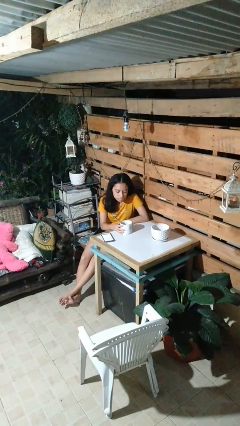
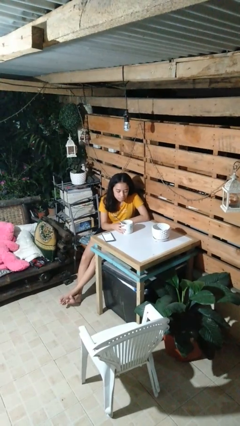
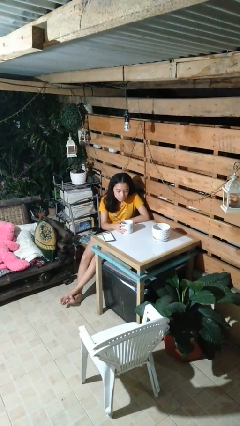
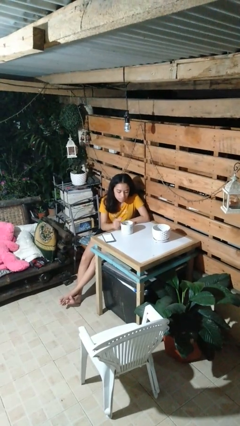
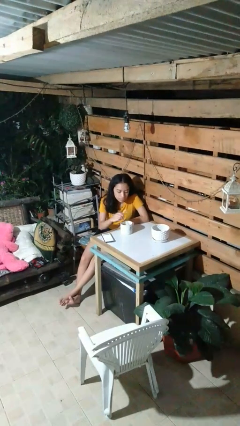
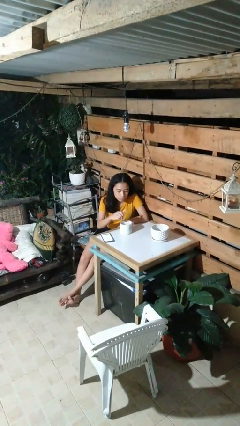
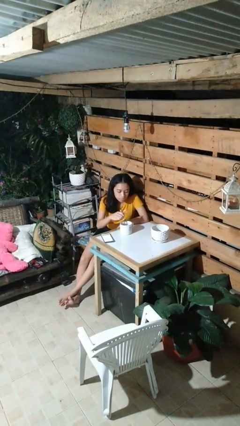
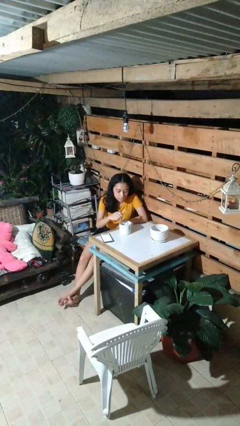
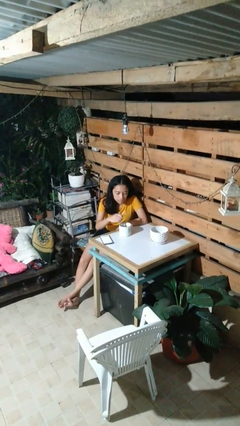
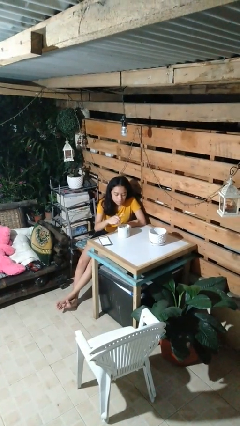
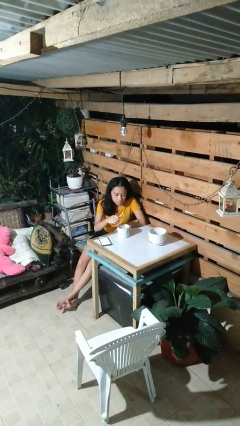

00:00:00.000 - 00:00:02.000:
person stirs mug

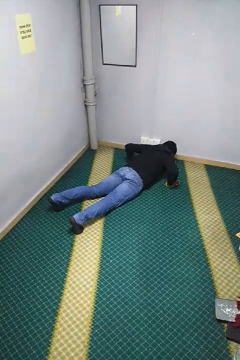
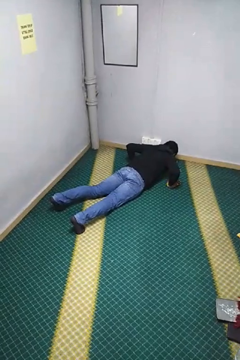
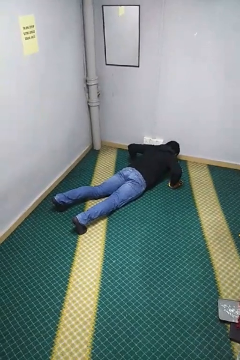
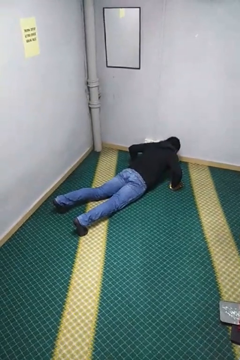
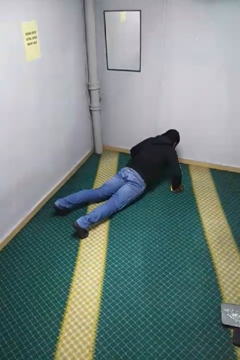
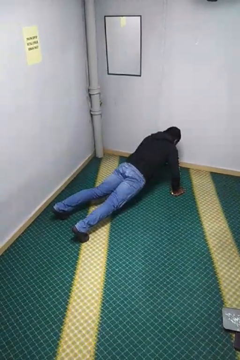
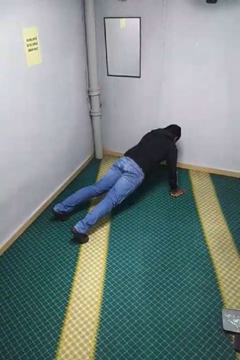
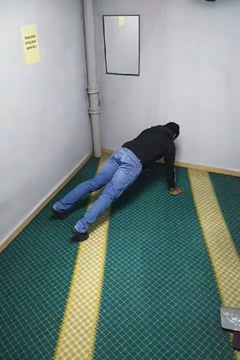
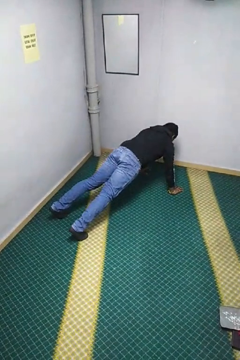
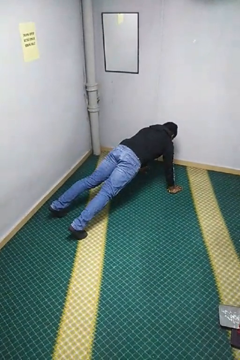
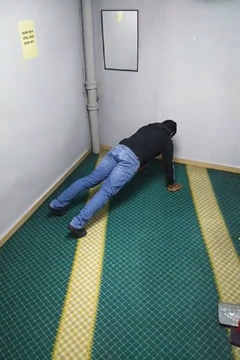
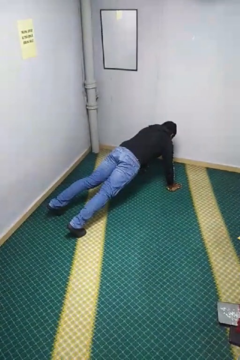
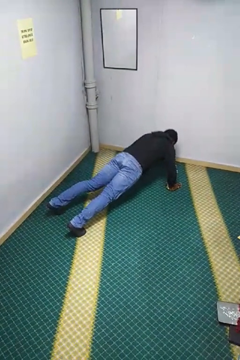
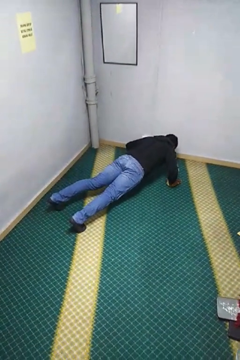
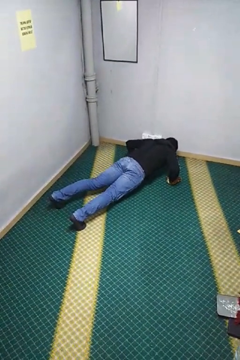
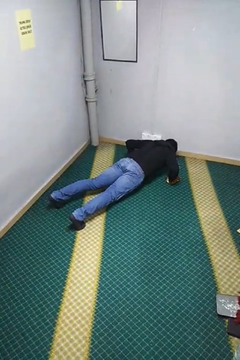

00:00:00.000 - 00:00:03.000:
person exercises with pushup

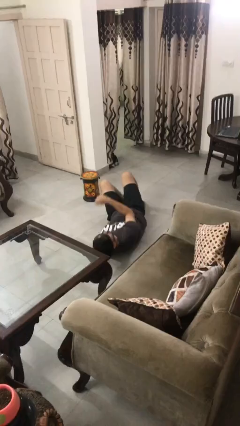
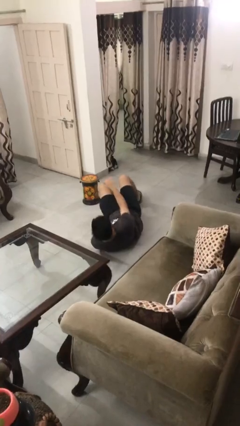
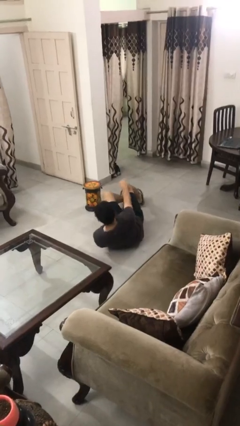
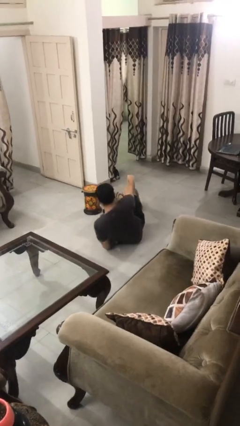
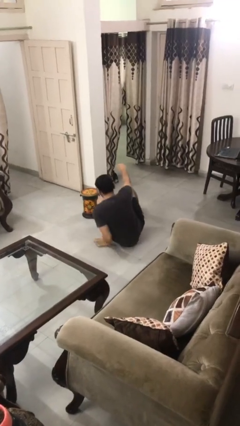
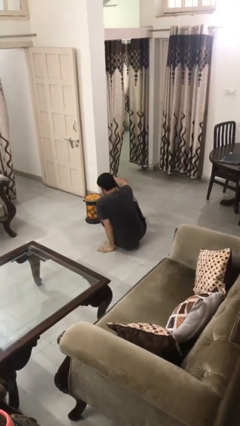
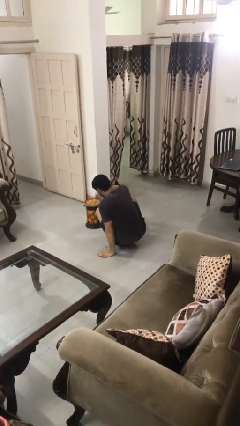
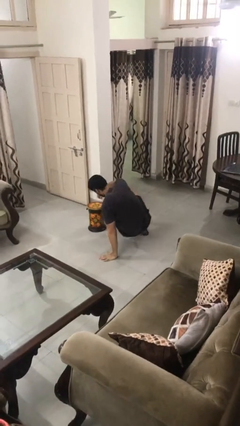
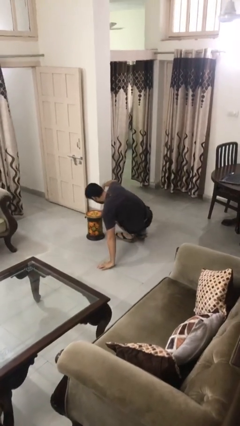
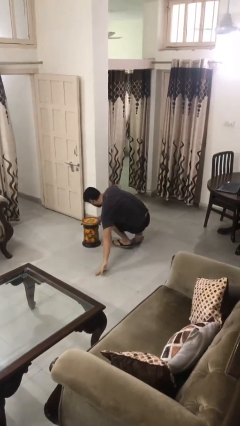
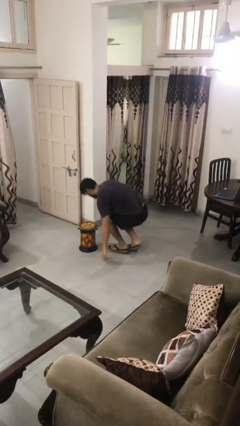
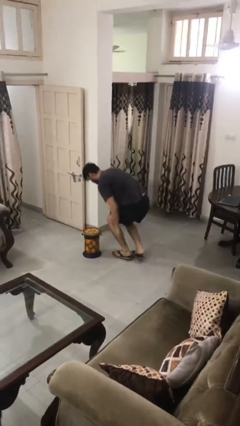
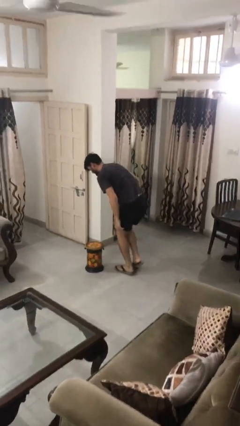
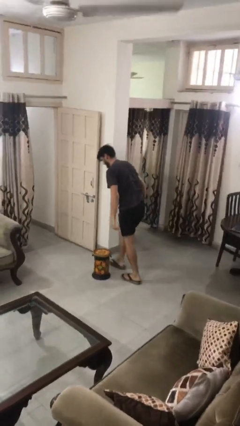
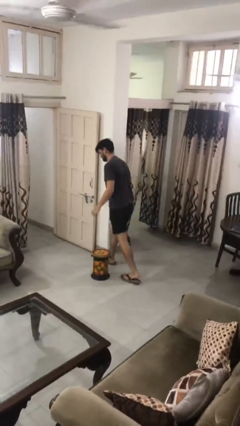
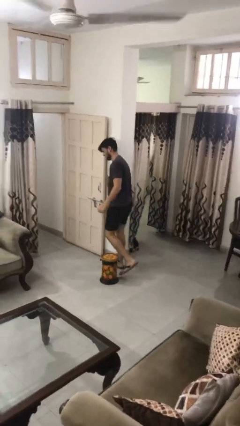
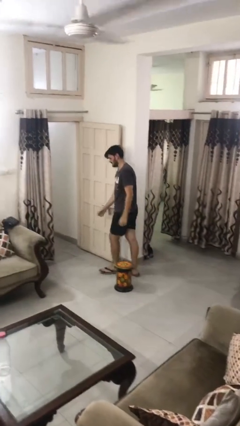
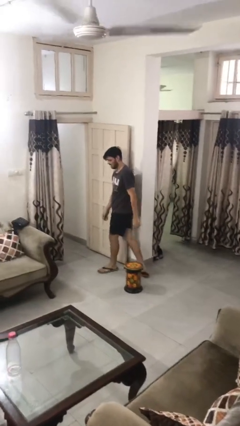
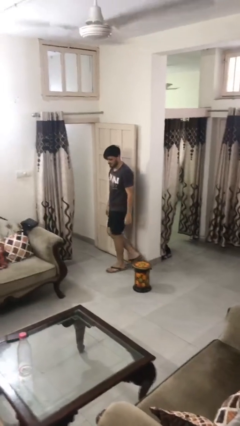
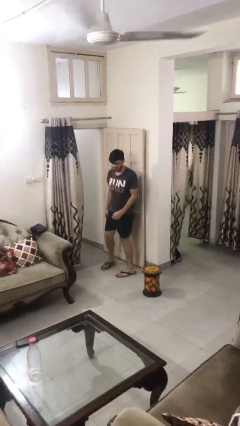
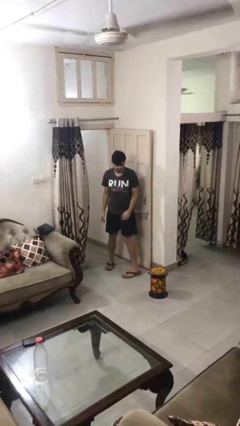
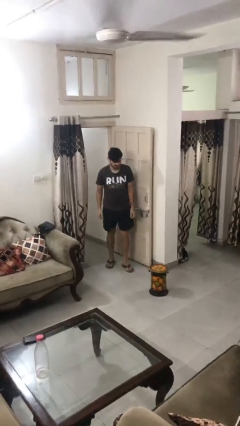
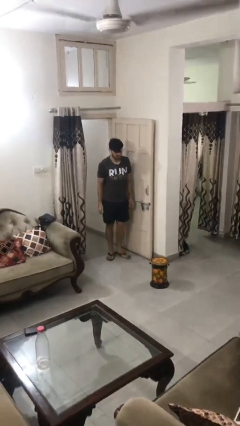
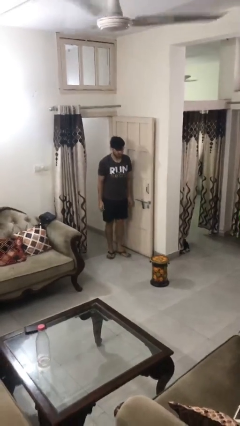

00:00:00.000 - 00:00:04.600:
person stands up from floor

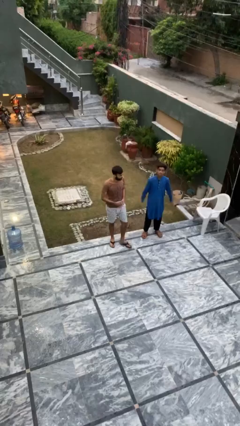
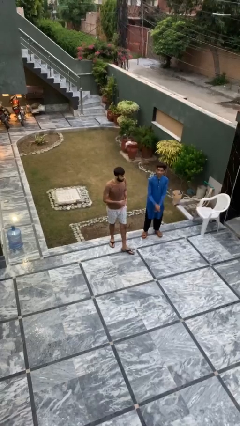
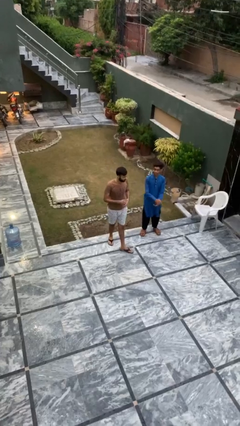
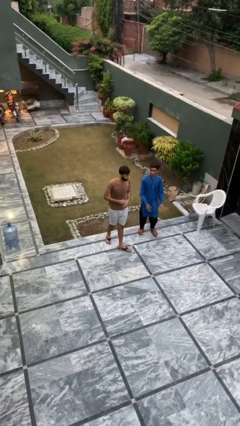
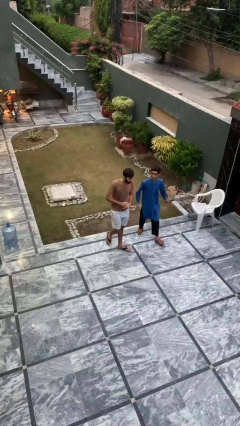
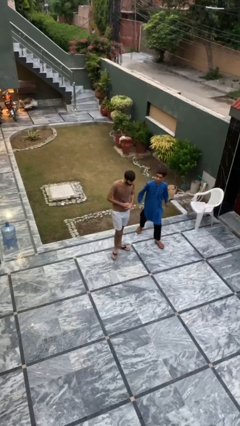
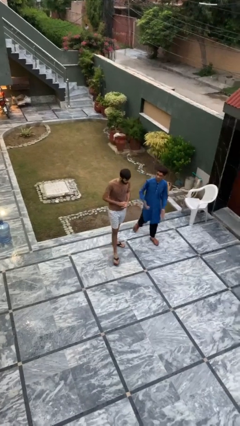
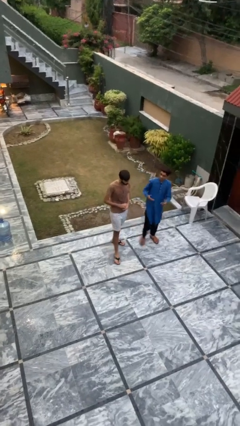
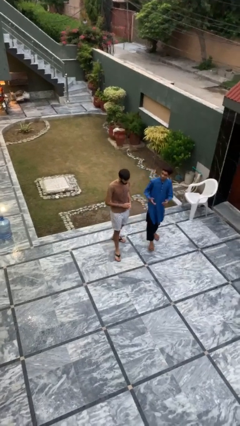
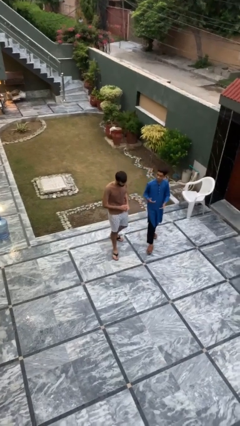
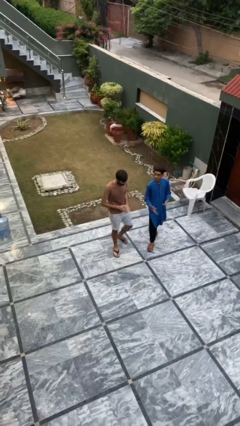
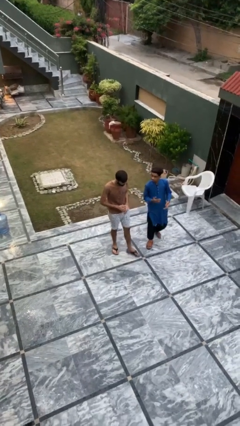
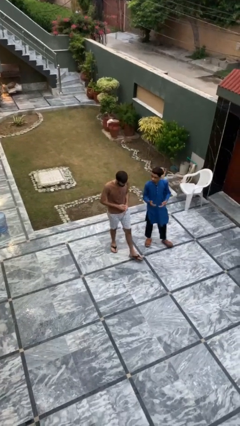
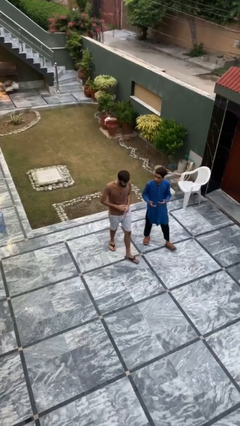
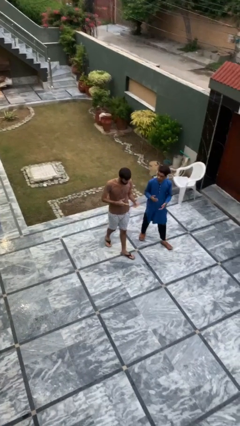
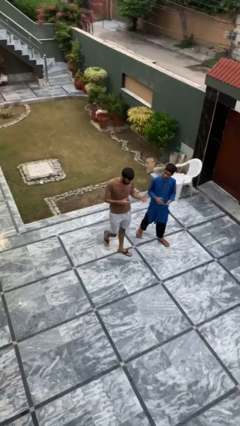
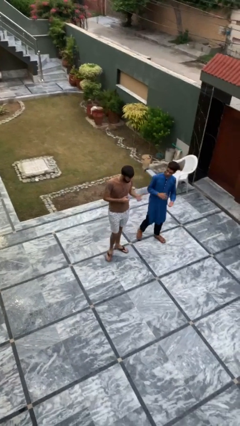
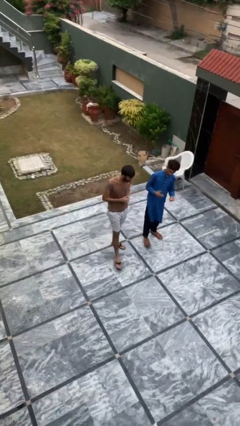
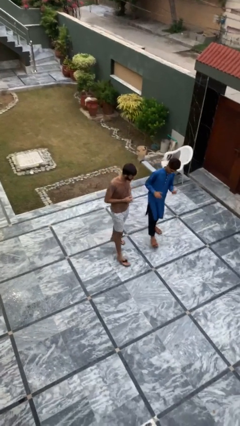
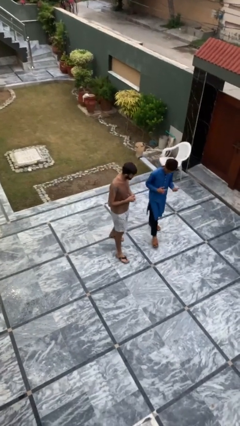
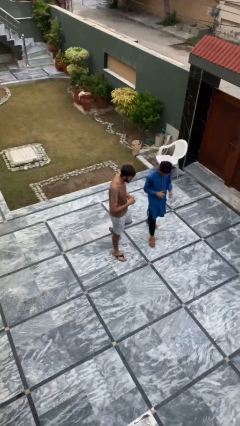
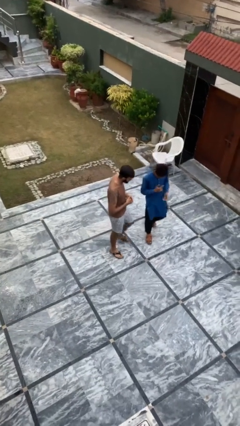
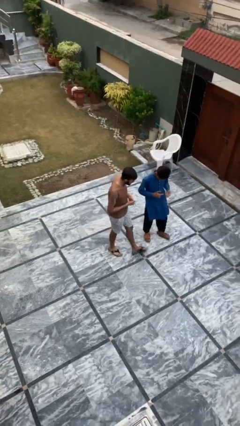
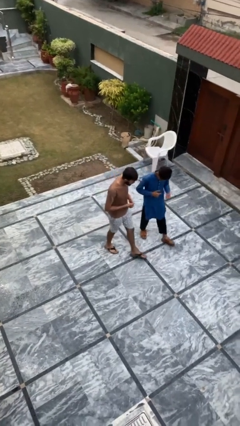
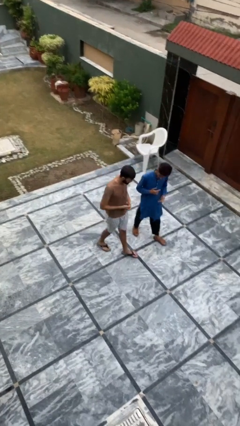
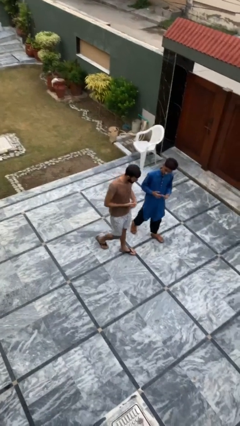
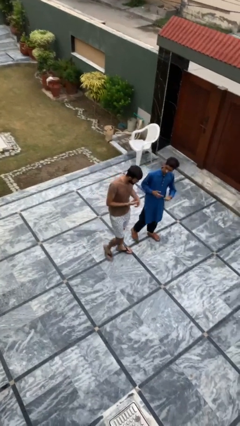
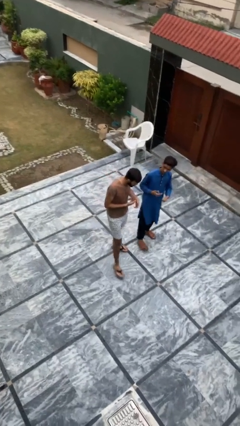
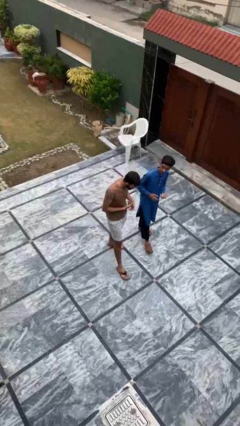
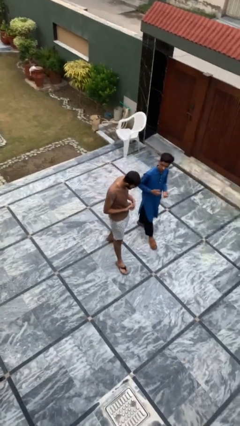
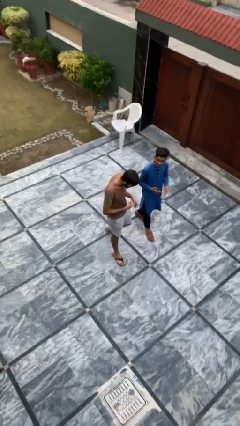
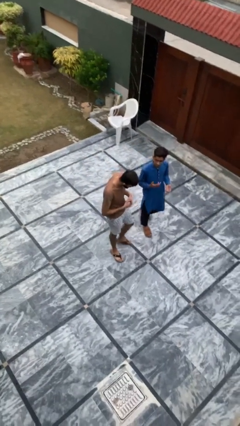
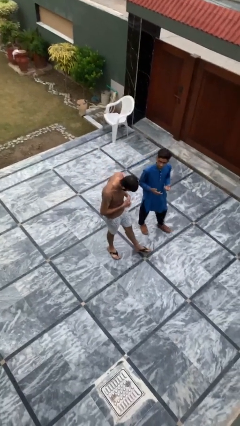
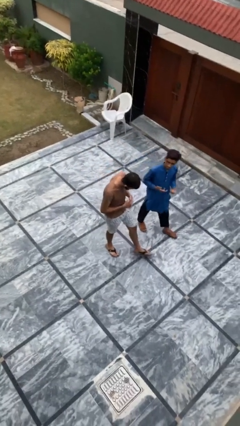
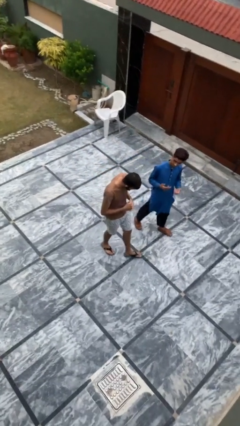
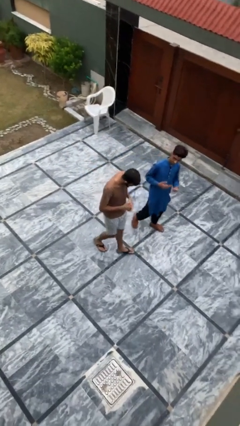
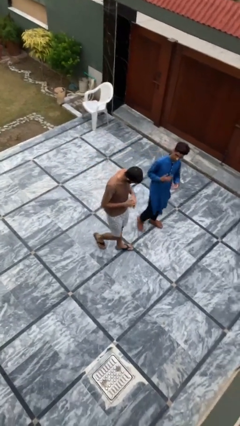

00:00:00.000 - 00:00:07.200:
person talks to person

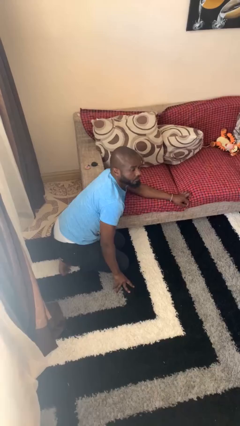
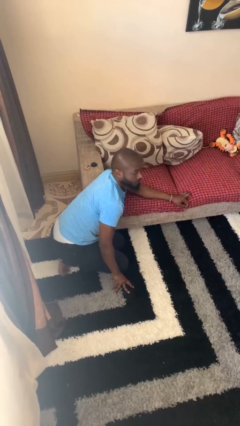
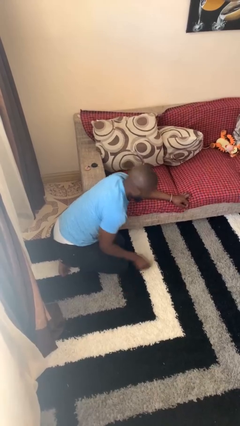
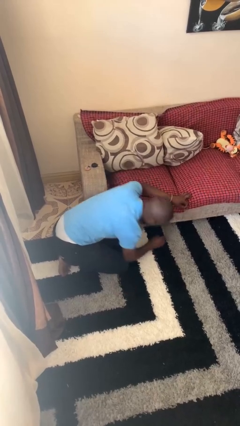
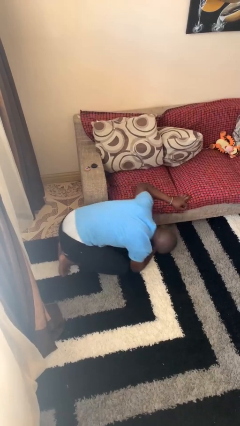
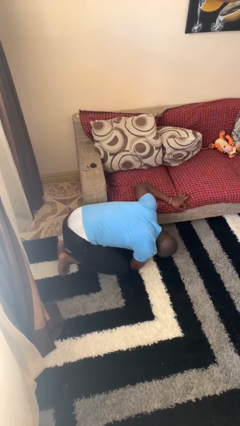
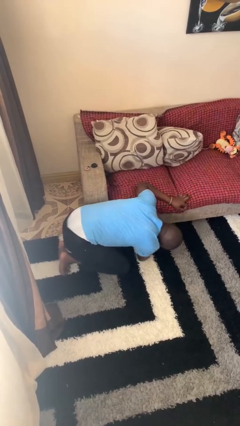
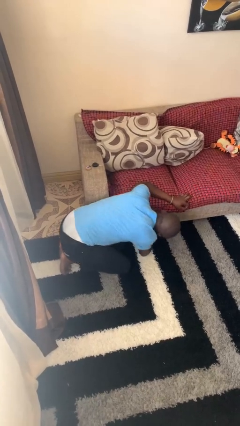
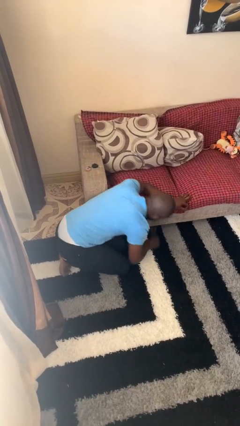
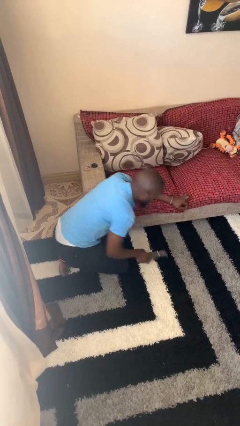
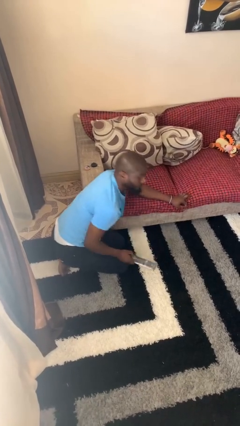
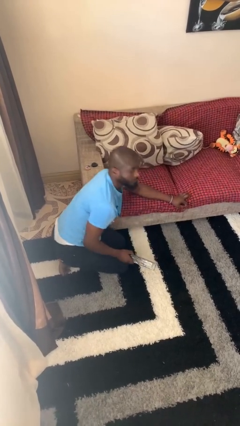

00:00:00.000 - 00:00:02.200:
person searches under couch
